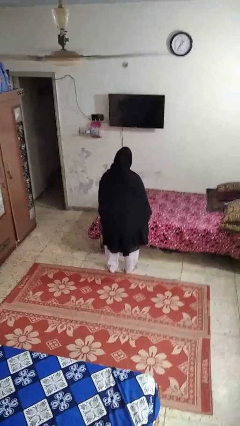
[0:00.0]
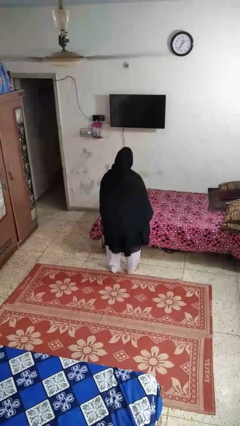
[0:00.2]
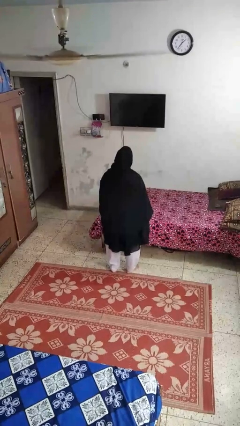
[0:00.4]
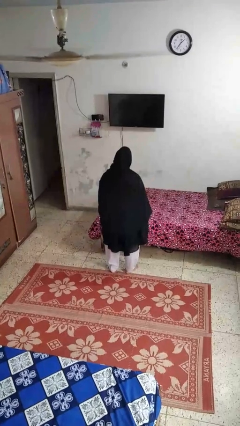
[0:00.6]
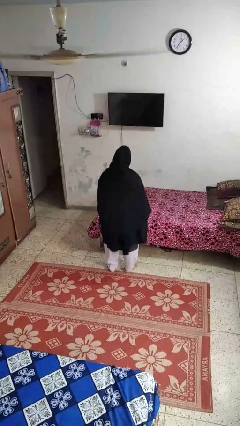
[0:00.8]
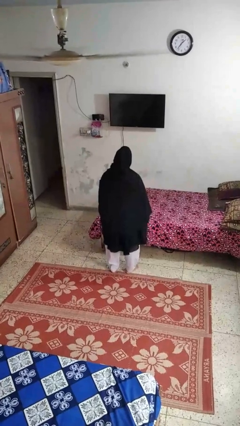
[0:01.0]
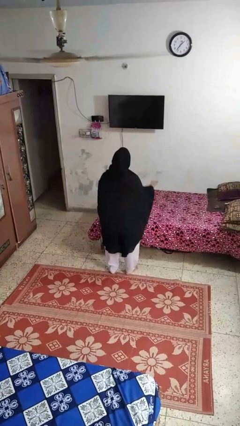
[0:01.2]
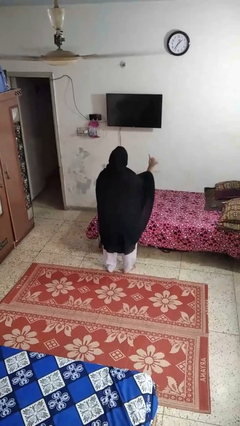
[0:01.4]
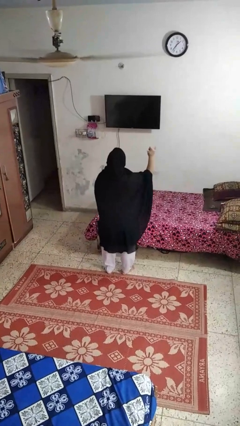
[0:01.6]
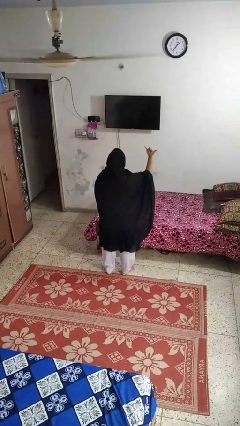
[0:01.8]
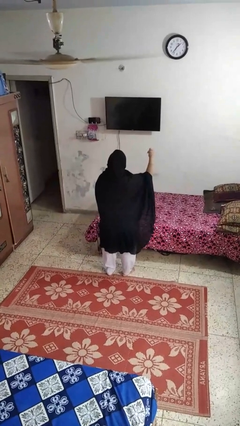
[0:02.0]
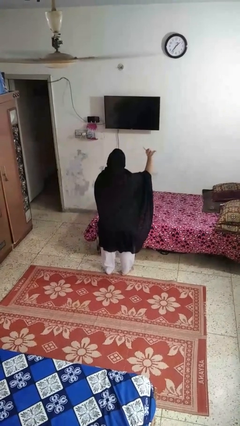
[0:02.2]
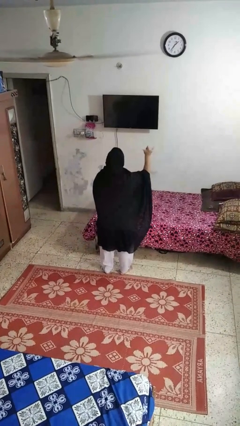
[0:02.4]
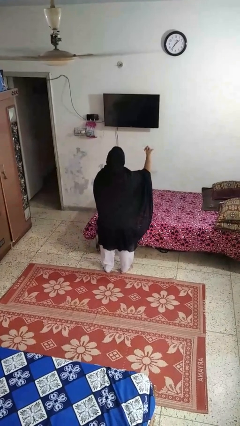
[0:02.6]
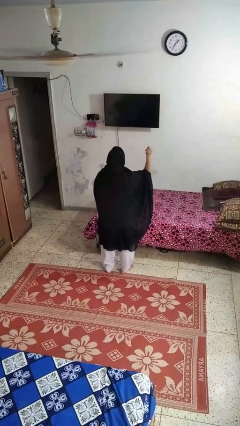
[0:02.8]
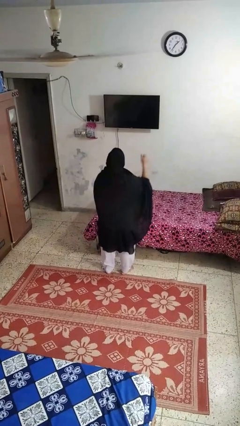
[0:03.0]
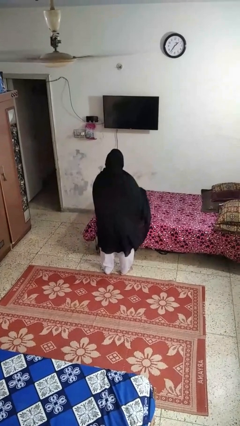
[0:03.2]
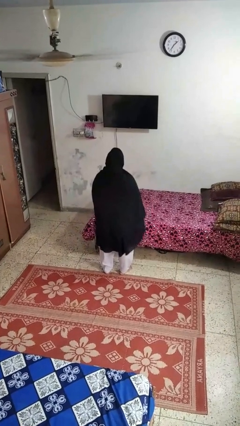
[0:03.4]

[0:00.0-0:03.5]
person gestures hang loose

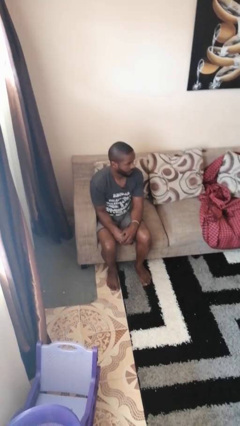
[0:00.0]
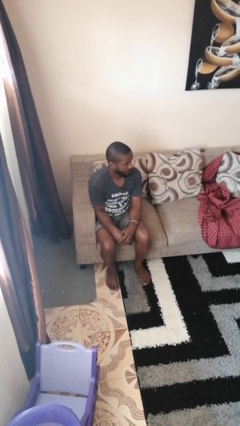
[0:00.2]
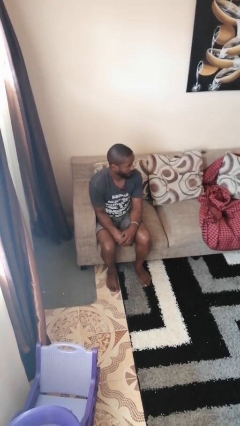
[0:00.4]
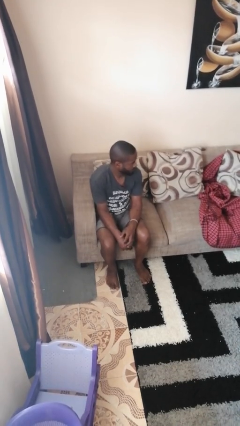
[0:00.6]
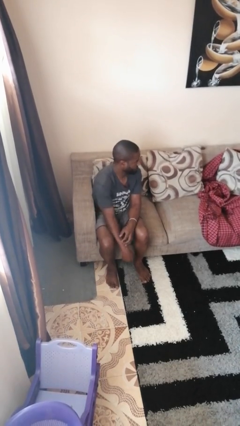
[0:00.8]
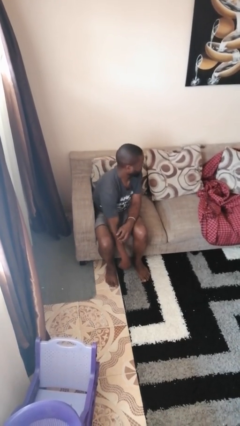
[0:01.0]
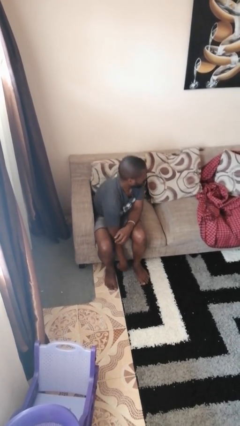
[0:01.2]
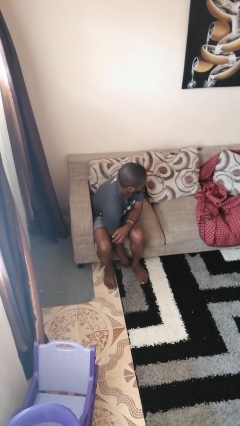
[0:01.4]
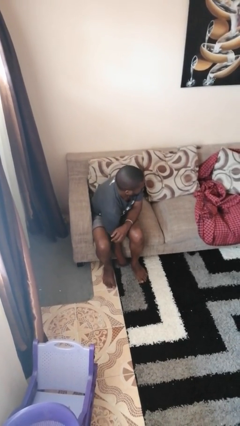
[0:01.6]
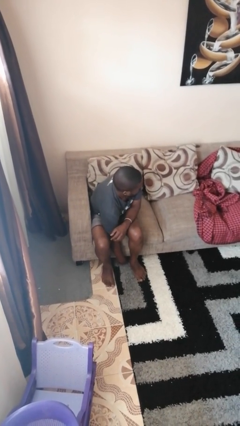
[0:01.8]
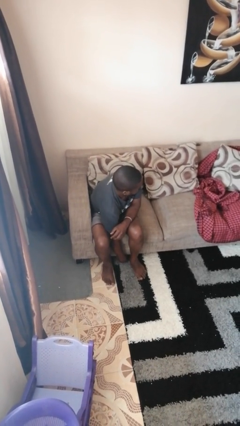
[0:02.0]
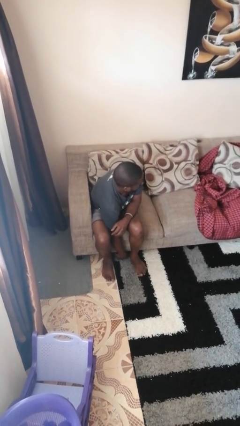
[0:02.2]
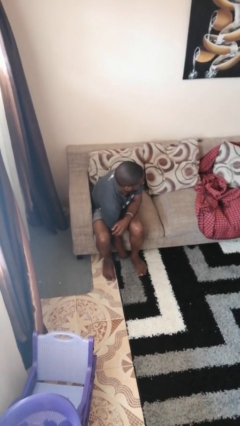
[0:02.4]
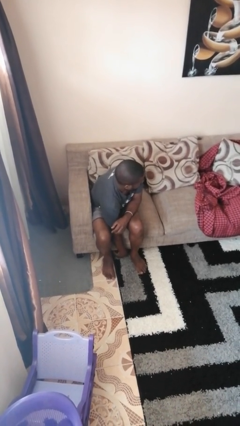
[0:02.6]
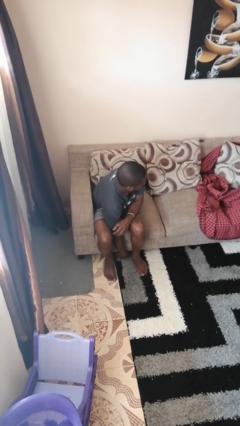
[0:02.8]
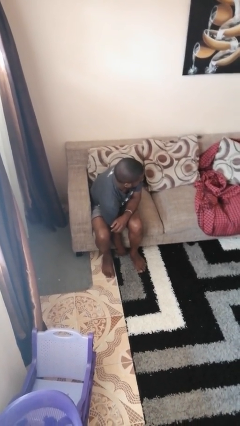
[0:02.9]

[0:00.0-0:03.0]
person searches under couch

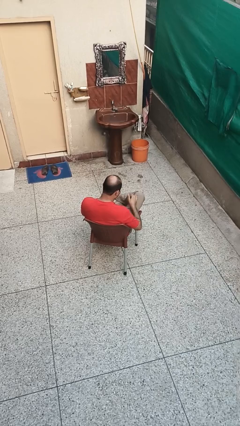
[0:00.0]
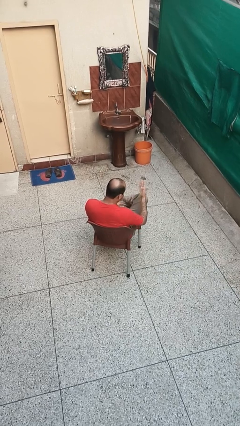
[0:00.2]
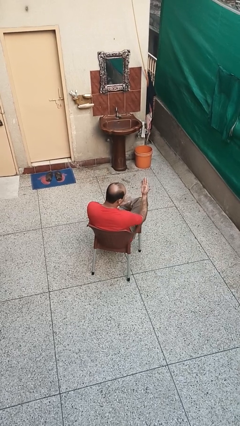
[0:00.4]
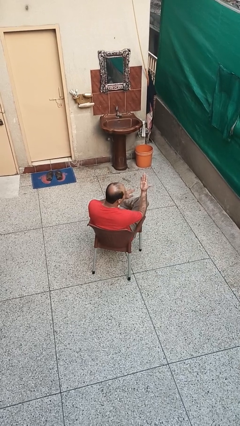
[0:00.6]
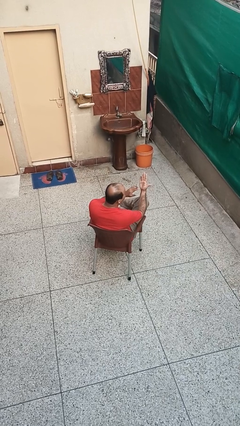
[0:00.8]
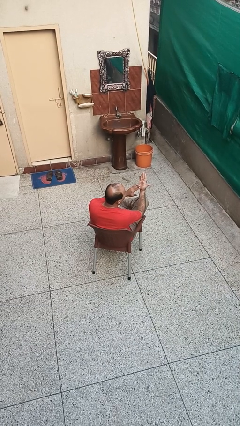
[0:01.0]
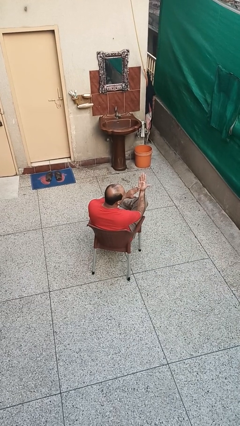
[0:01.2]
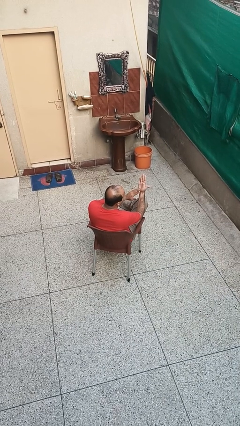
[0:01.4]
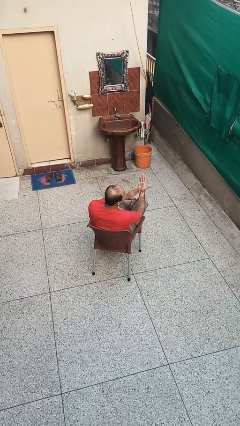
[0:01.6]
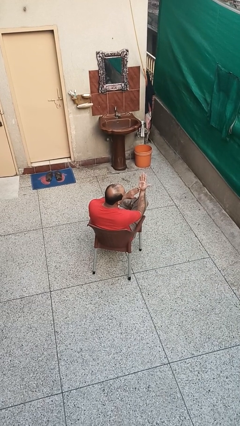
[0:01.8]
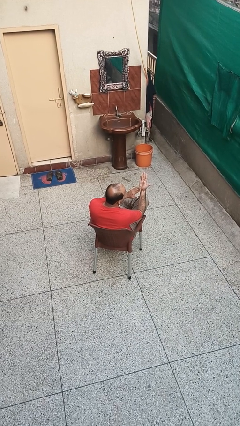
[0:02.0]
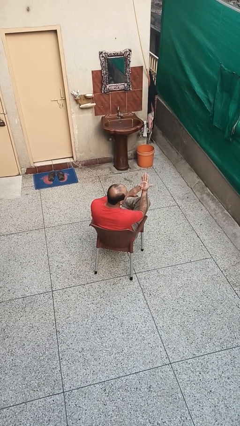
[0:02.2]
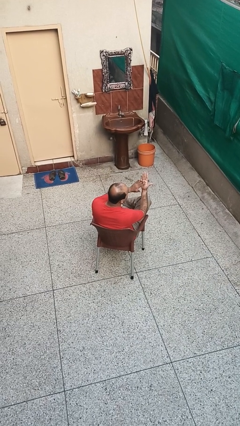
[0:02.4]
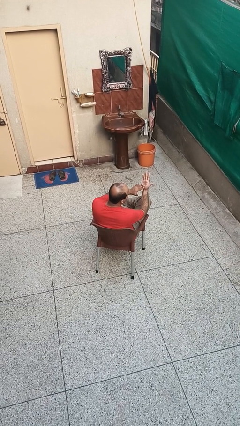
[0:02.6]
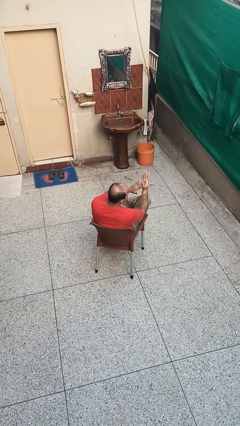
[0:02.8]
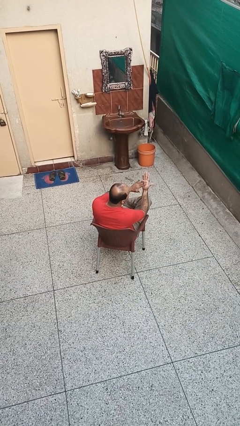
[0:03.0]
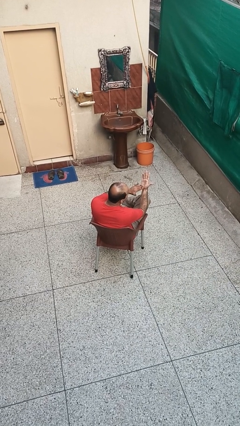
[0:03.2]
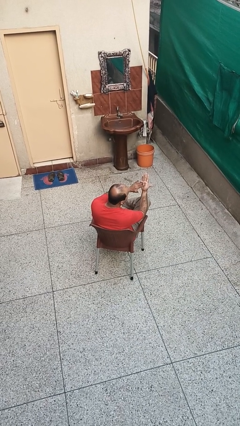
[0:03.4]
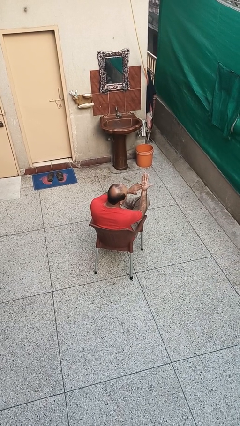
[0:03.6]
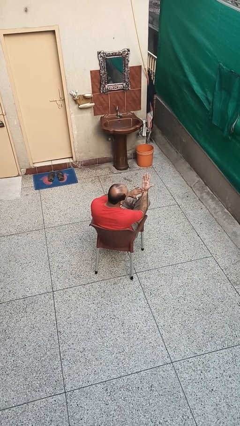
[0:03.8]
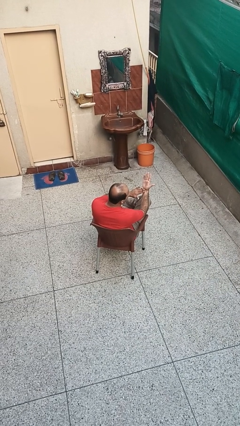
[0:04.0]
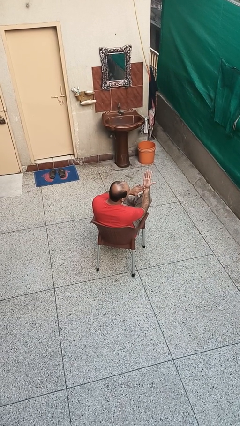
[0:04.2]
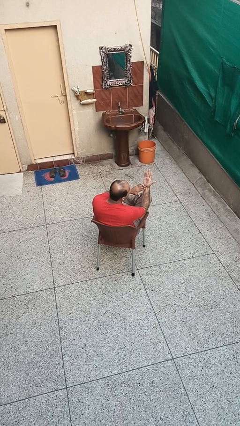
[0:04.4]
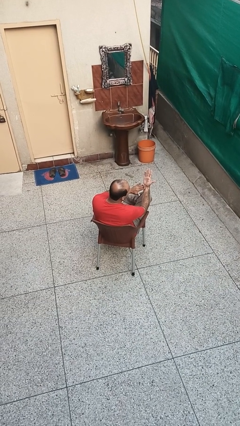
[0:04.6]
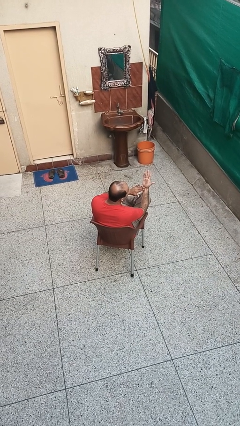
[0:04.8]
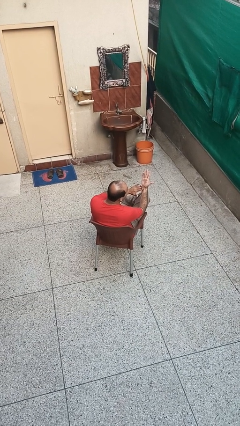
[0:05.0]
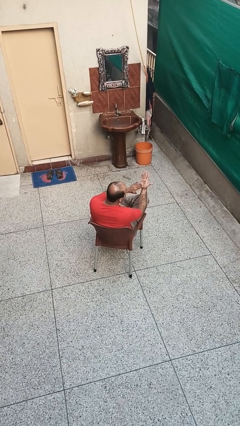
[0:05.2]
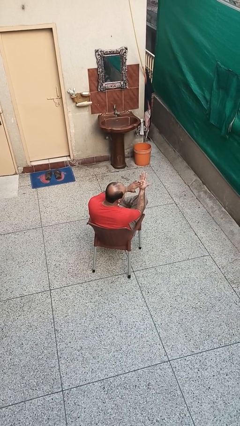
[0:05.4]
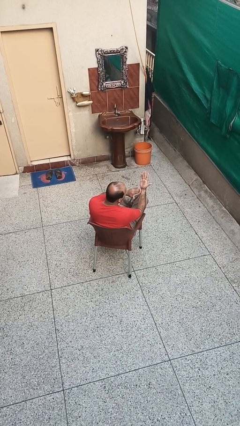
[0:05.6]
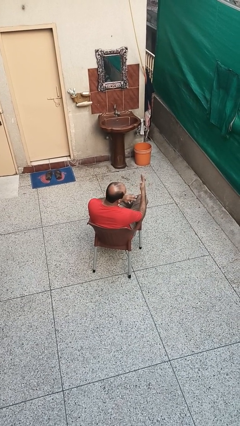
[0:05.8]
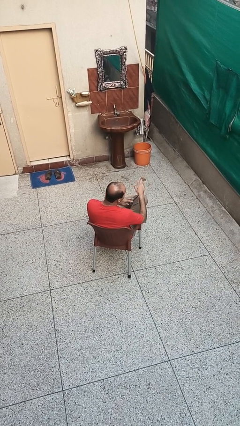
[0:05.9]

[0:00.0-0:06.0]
person looks at hands in lap

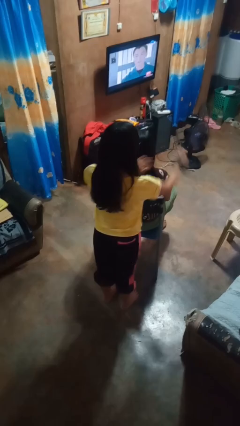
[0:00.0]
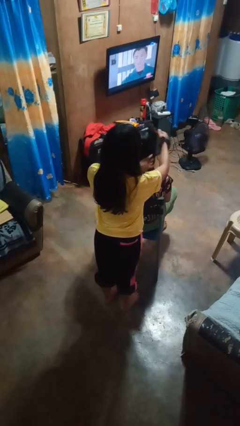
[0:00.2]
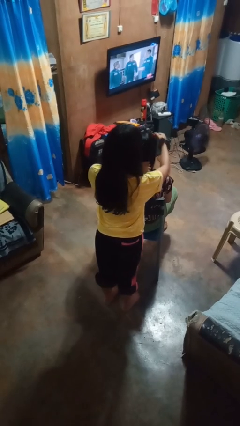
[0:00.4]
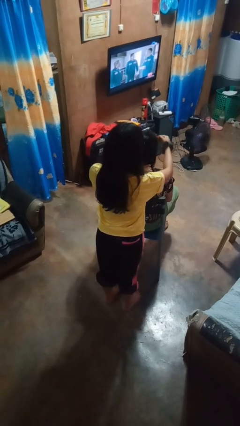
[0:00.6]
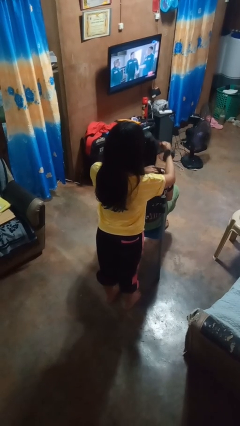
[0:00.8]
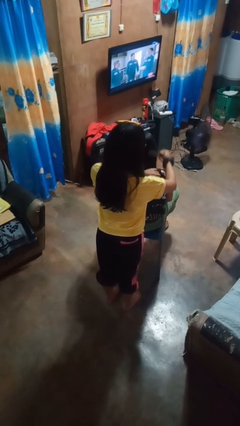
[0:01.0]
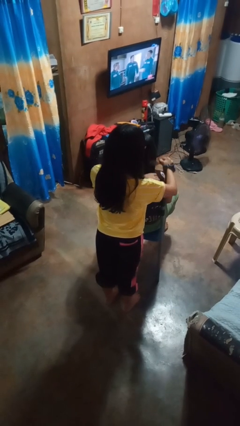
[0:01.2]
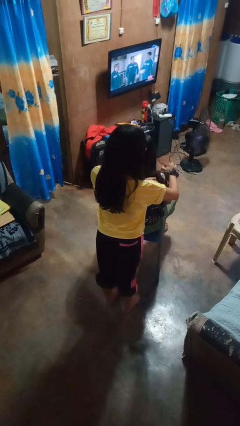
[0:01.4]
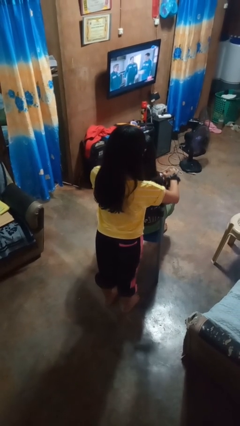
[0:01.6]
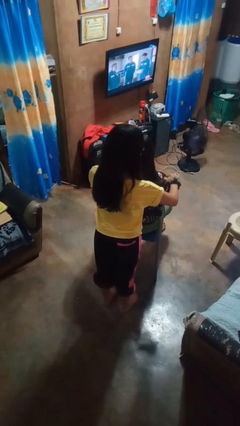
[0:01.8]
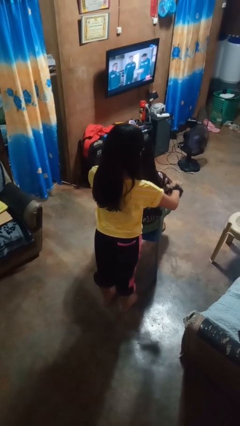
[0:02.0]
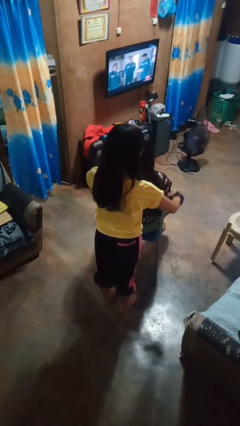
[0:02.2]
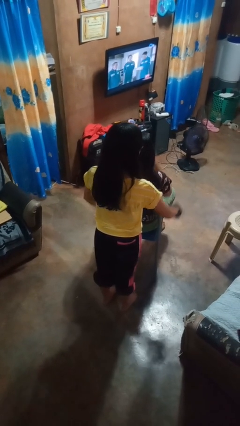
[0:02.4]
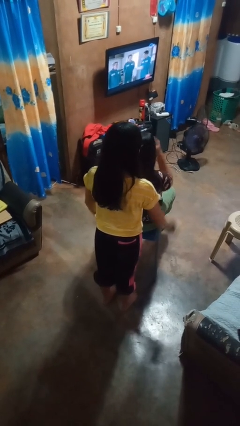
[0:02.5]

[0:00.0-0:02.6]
person brushes hair of person

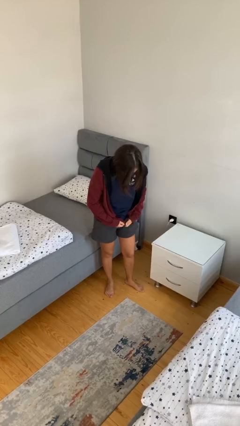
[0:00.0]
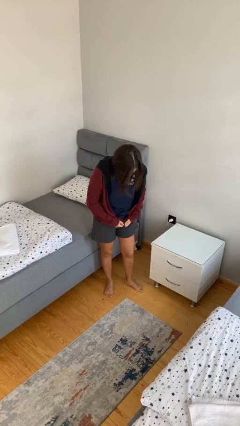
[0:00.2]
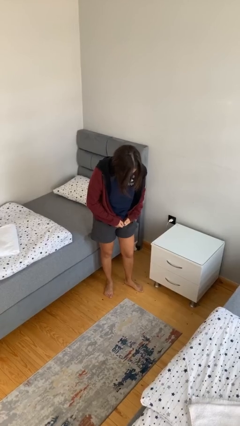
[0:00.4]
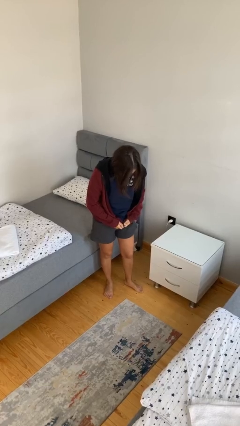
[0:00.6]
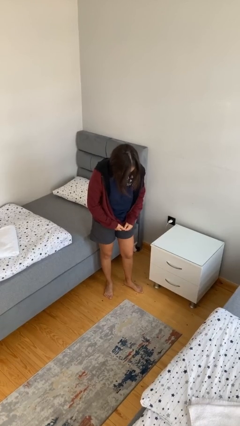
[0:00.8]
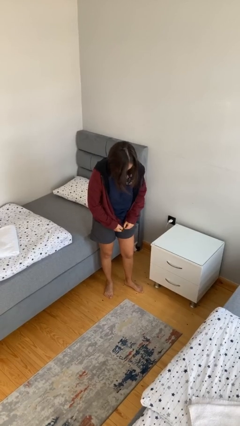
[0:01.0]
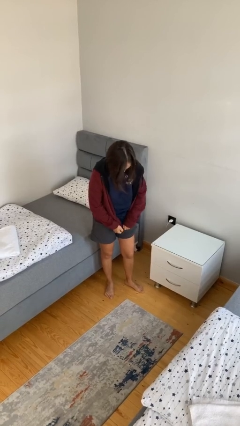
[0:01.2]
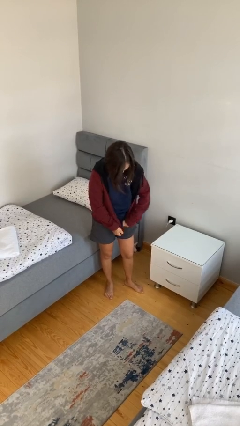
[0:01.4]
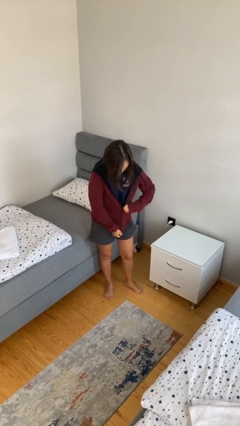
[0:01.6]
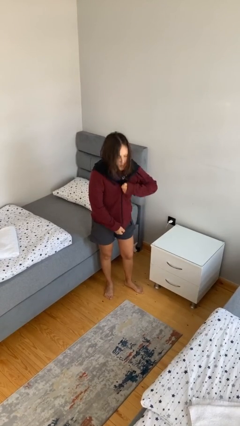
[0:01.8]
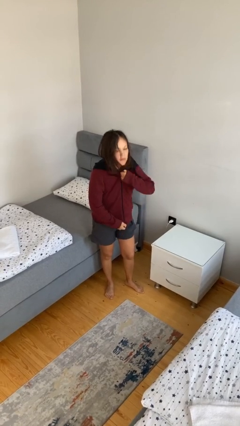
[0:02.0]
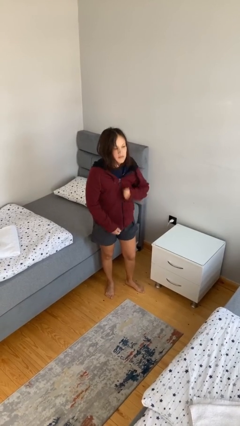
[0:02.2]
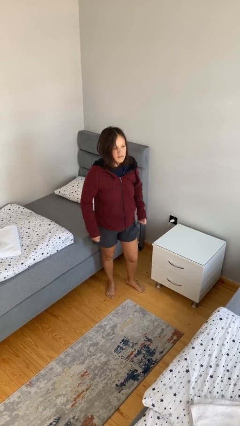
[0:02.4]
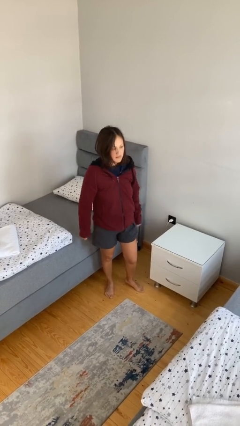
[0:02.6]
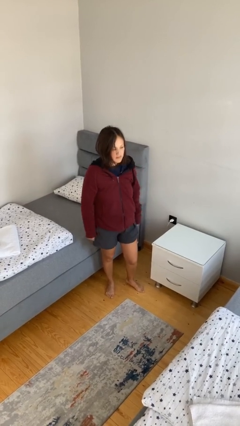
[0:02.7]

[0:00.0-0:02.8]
person zips up jacket

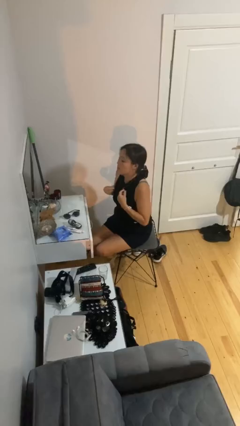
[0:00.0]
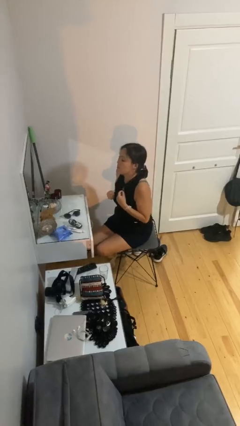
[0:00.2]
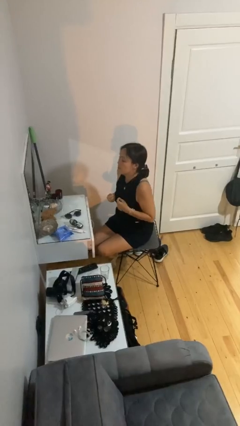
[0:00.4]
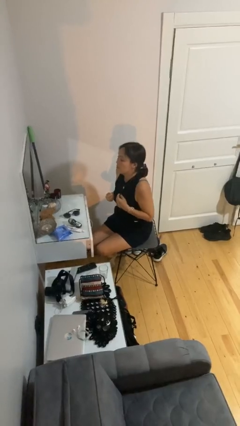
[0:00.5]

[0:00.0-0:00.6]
person takes off necklace
